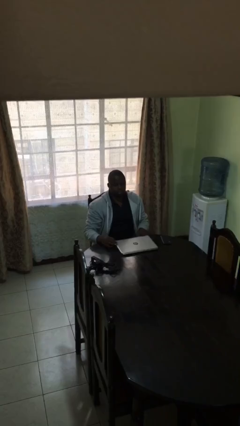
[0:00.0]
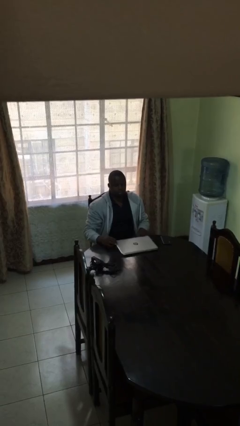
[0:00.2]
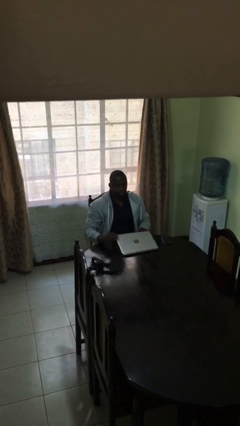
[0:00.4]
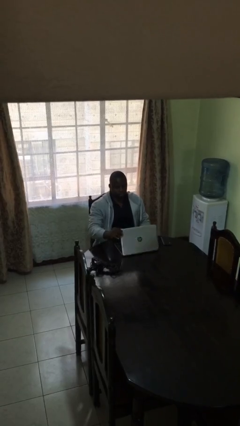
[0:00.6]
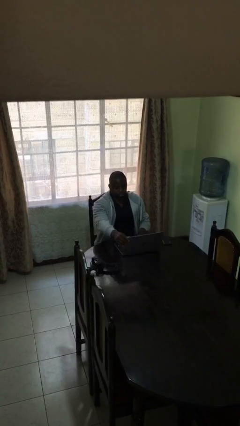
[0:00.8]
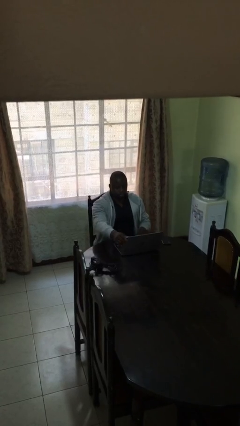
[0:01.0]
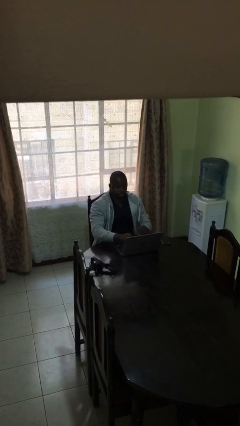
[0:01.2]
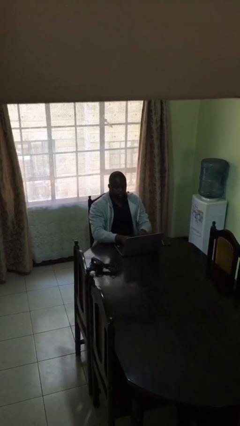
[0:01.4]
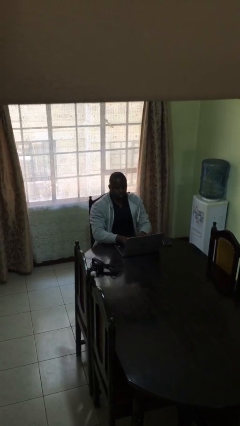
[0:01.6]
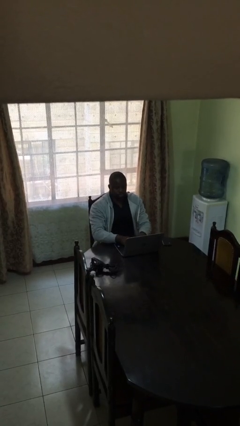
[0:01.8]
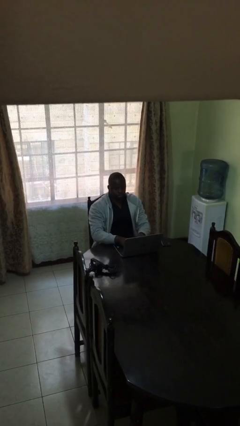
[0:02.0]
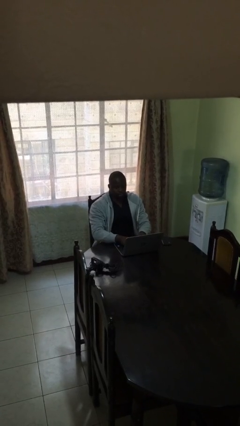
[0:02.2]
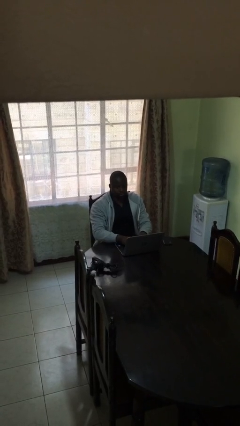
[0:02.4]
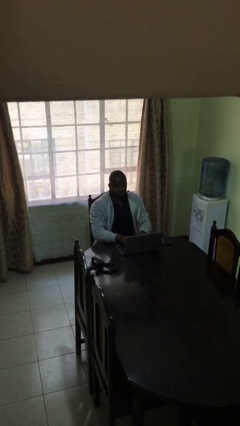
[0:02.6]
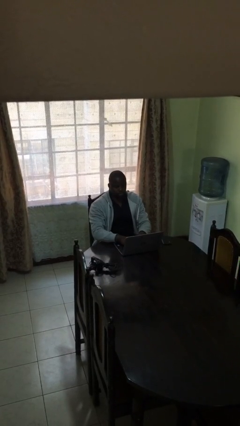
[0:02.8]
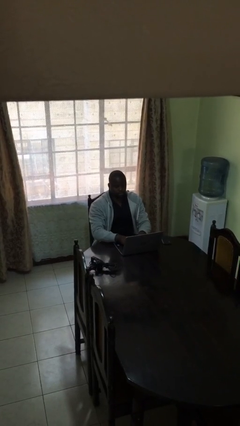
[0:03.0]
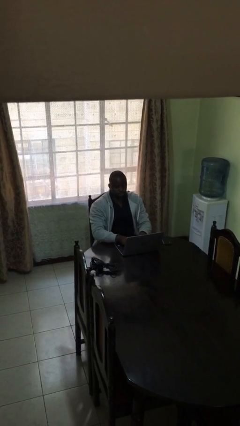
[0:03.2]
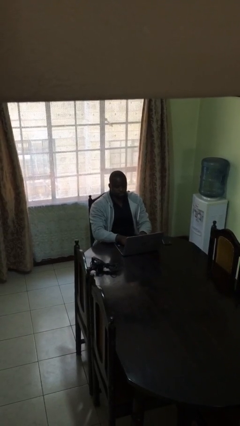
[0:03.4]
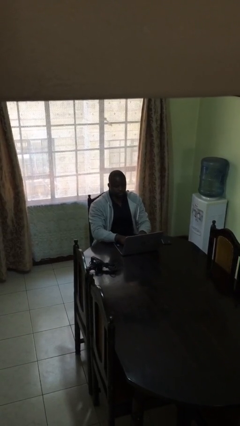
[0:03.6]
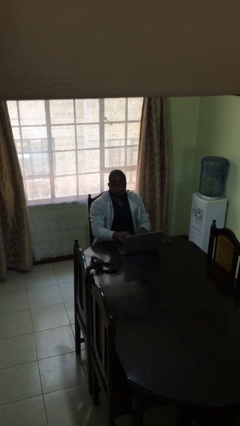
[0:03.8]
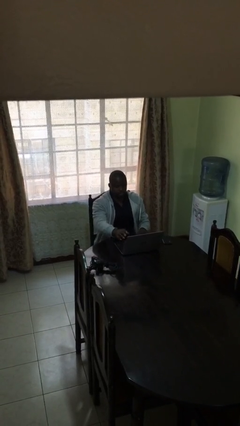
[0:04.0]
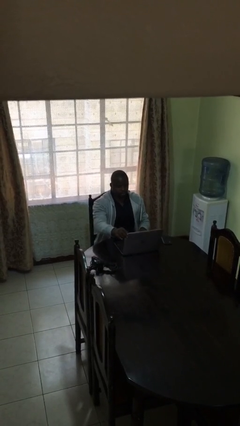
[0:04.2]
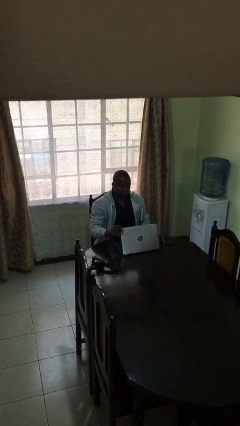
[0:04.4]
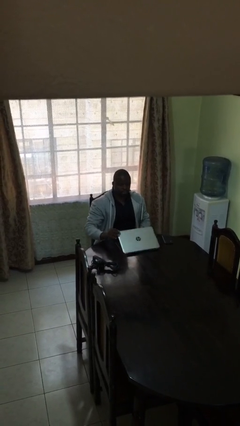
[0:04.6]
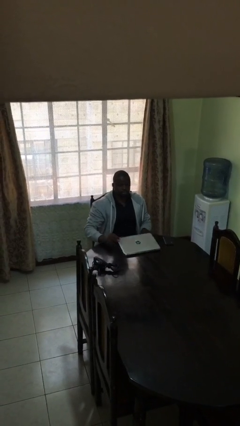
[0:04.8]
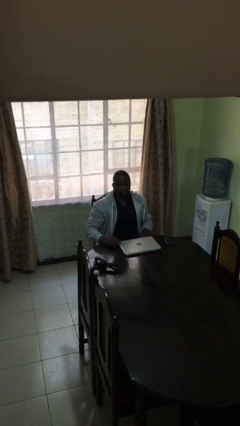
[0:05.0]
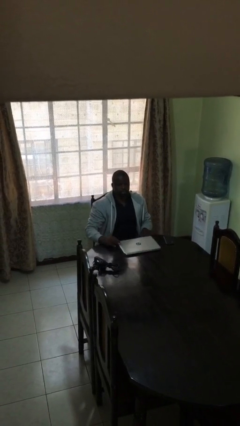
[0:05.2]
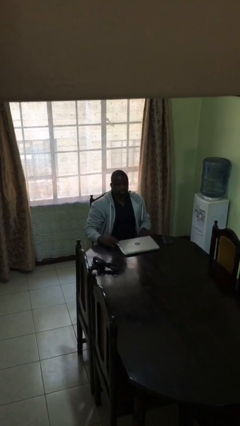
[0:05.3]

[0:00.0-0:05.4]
person interacts with laptop

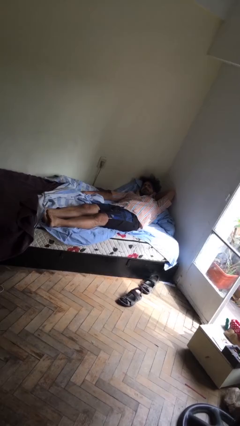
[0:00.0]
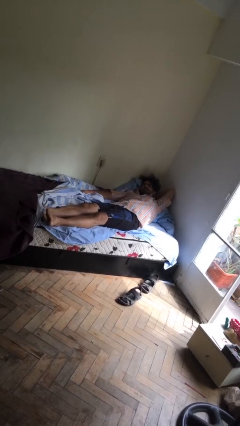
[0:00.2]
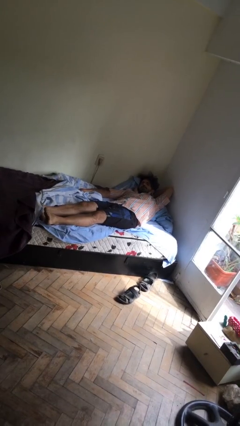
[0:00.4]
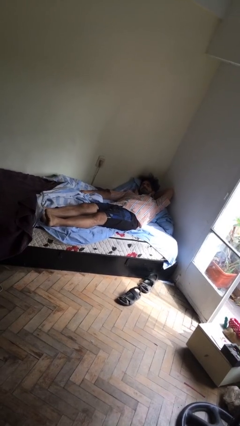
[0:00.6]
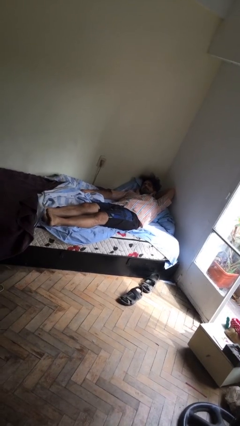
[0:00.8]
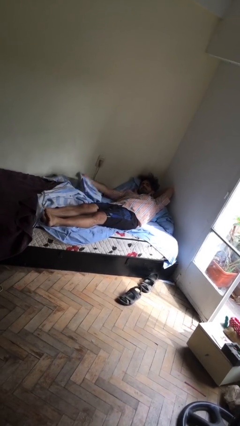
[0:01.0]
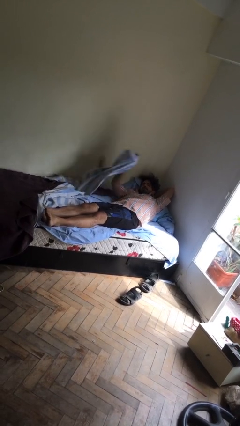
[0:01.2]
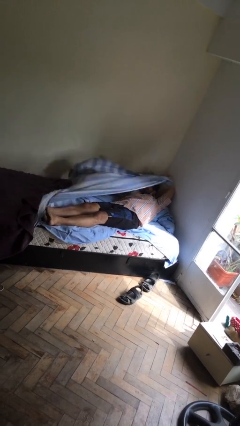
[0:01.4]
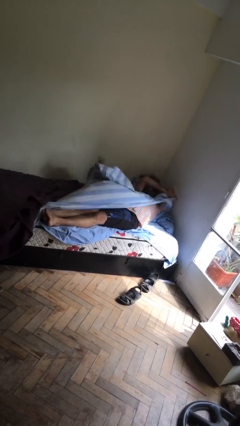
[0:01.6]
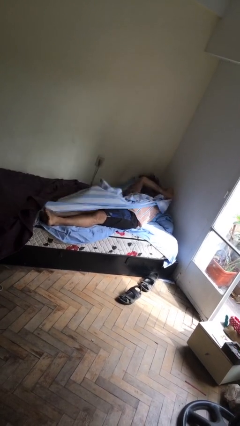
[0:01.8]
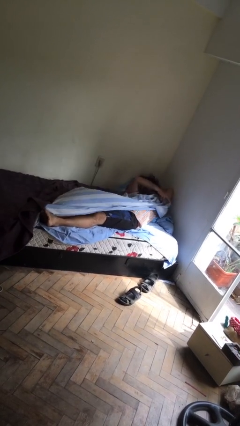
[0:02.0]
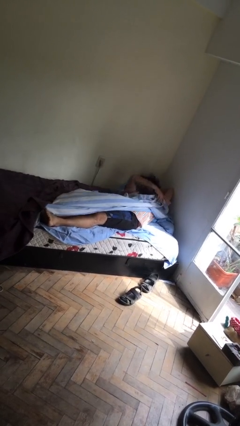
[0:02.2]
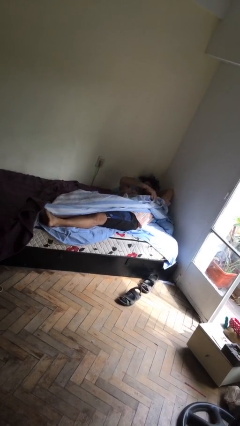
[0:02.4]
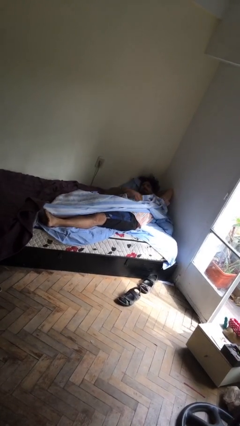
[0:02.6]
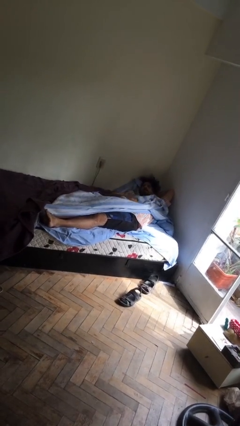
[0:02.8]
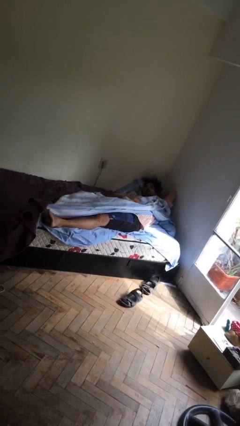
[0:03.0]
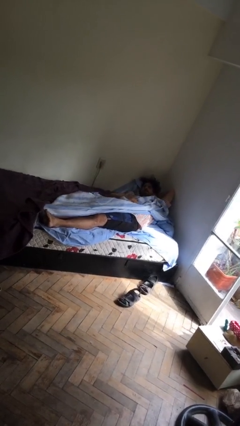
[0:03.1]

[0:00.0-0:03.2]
person covers with bedsheets

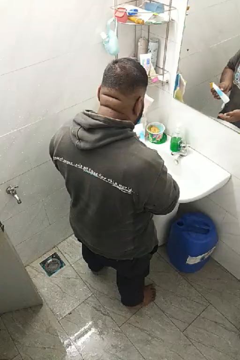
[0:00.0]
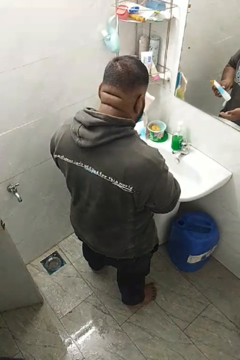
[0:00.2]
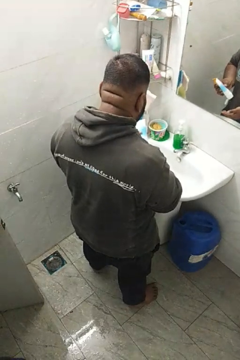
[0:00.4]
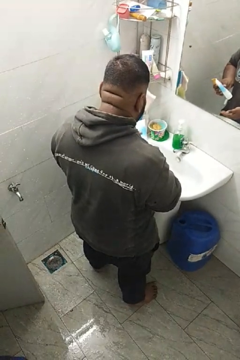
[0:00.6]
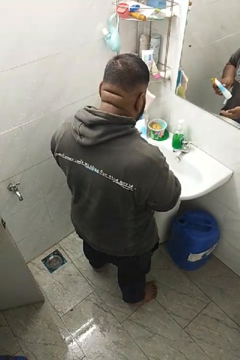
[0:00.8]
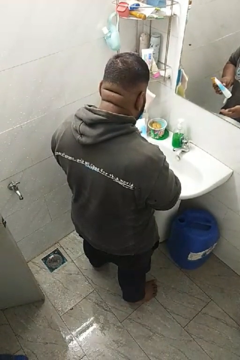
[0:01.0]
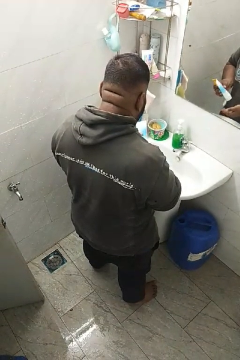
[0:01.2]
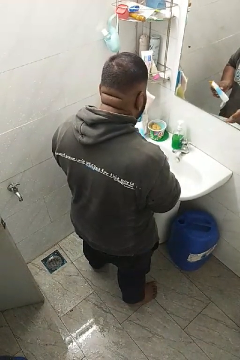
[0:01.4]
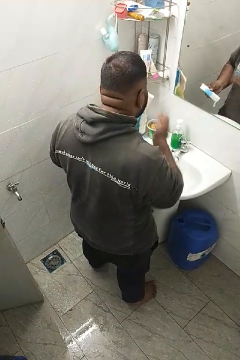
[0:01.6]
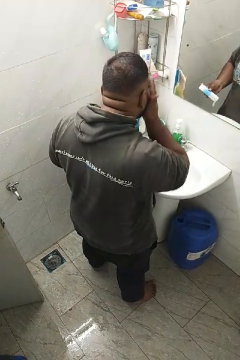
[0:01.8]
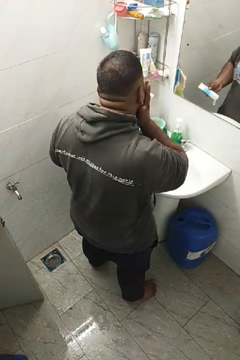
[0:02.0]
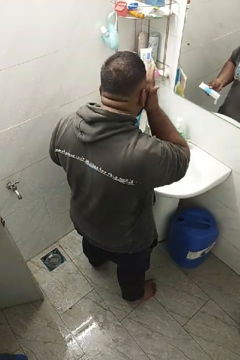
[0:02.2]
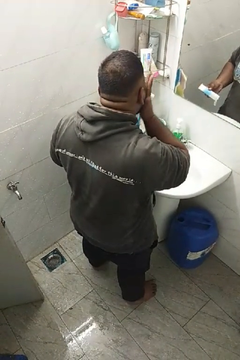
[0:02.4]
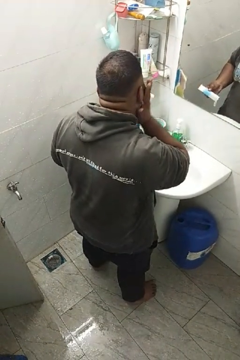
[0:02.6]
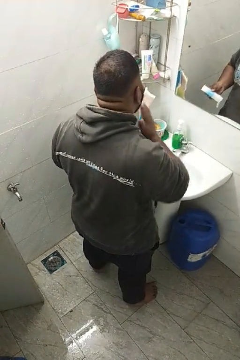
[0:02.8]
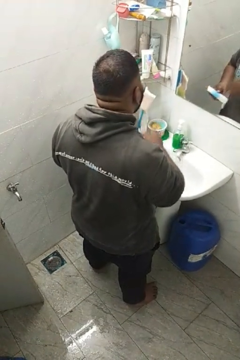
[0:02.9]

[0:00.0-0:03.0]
person applies shaving cream

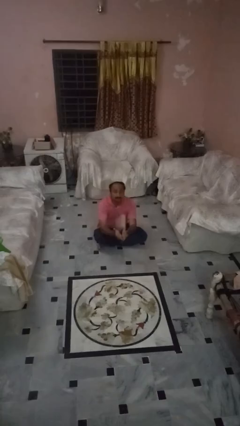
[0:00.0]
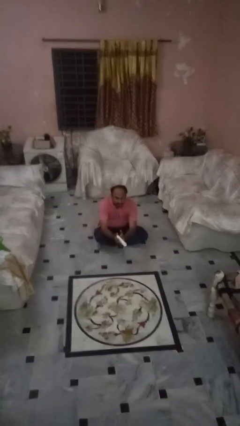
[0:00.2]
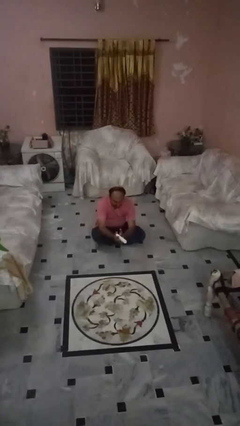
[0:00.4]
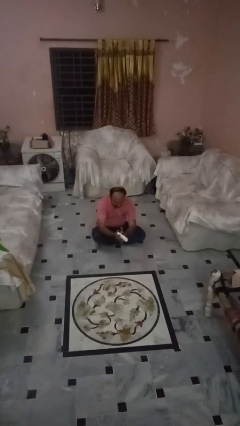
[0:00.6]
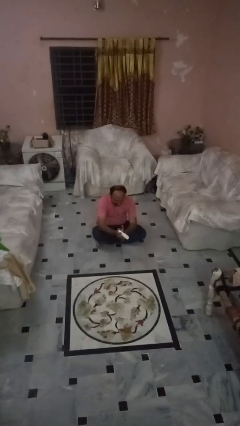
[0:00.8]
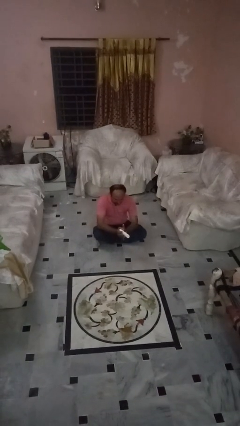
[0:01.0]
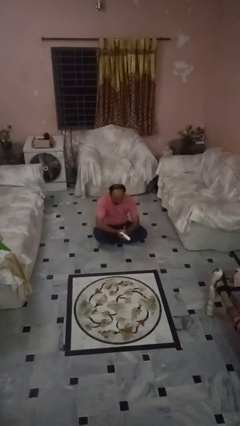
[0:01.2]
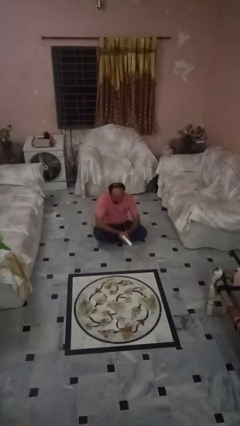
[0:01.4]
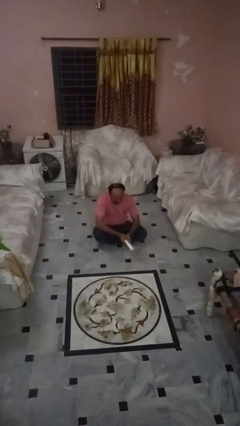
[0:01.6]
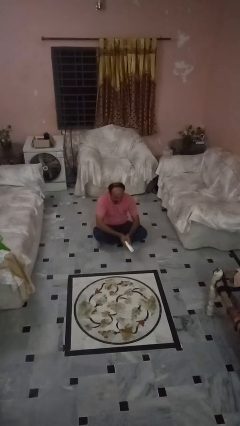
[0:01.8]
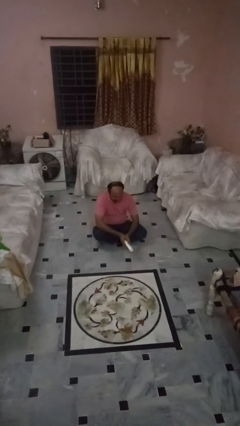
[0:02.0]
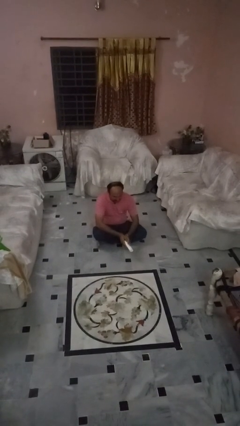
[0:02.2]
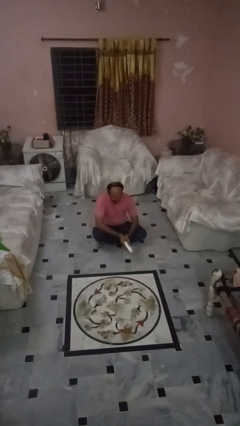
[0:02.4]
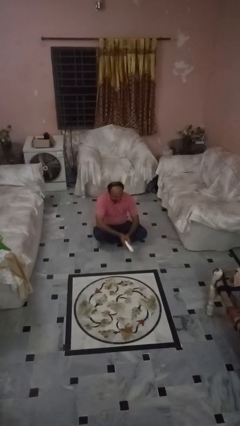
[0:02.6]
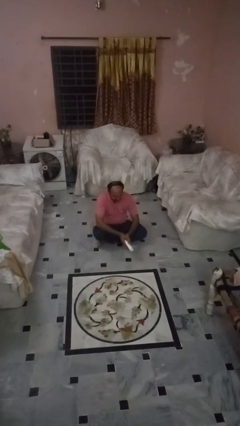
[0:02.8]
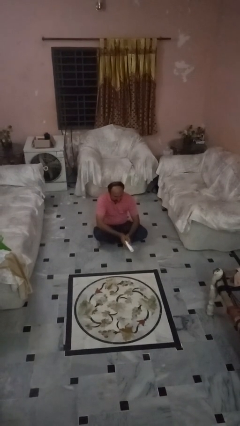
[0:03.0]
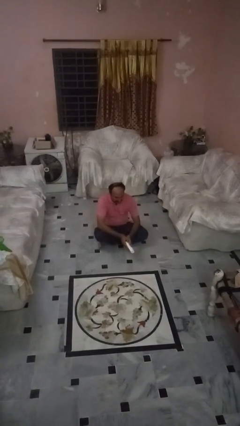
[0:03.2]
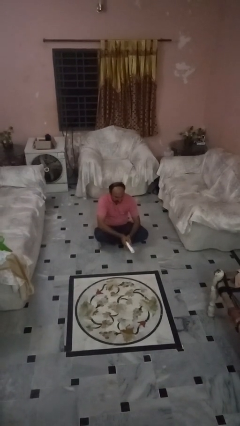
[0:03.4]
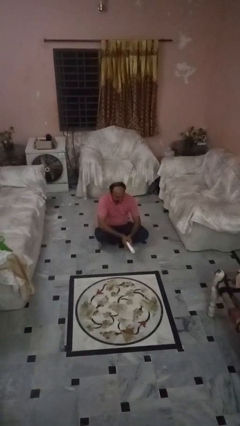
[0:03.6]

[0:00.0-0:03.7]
person catches dropped object

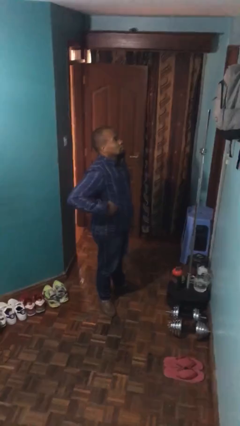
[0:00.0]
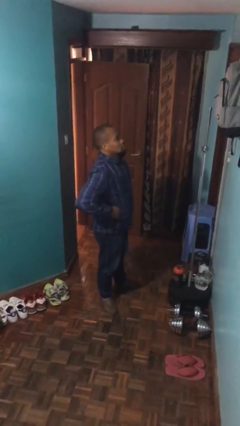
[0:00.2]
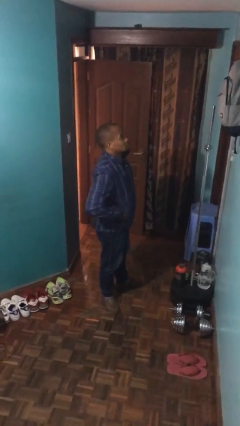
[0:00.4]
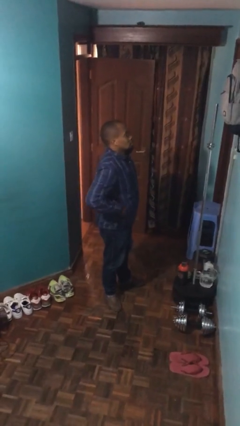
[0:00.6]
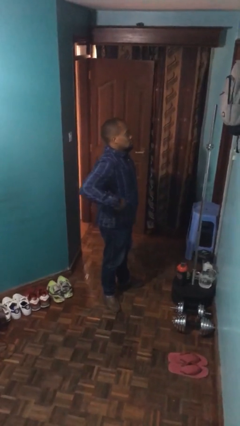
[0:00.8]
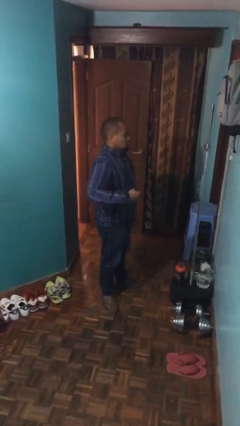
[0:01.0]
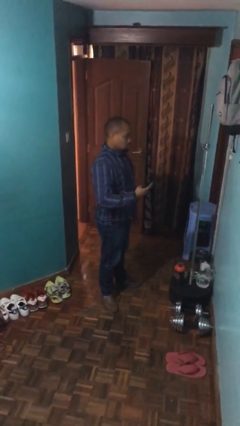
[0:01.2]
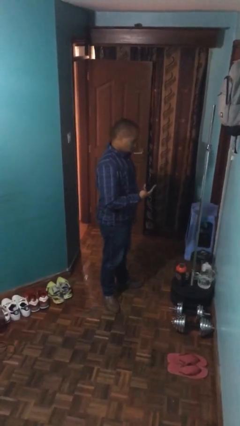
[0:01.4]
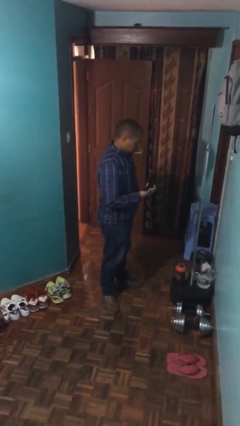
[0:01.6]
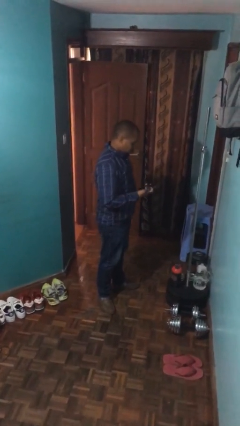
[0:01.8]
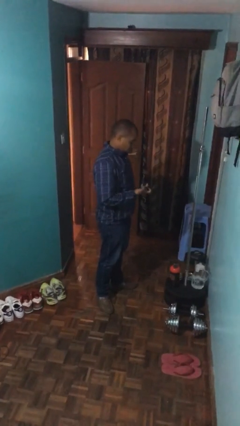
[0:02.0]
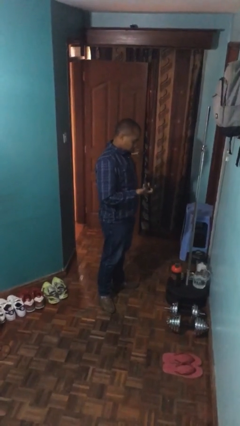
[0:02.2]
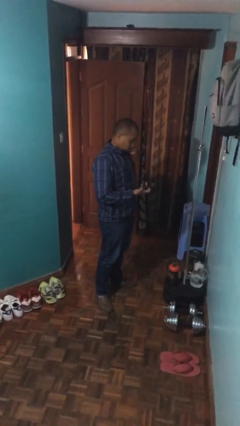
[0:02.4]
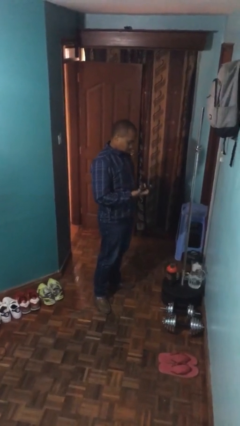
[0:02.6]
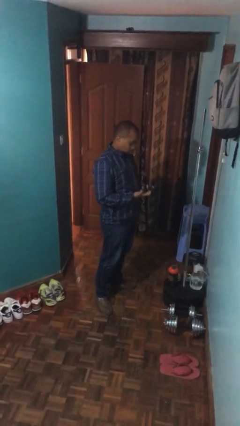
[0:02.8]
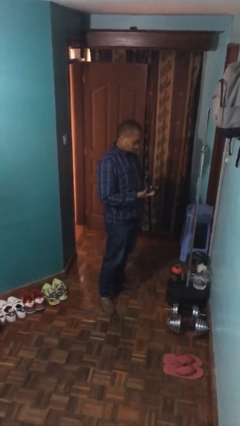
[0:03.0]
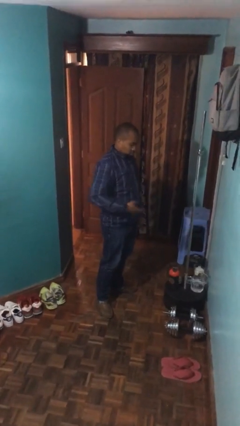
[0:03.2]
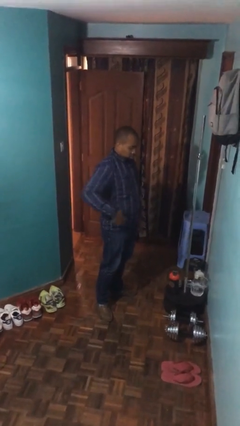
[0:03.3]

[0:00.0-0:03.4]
person takes phone from pocket
